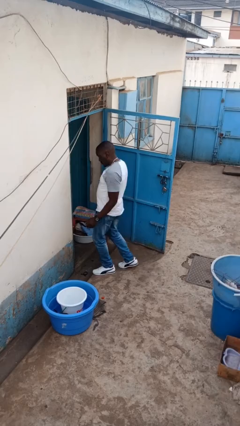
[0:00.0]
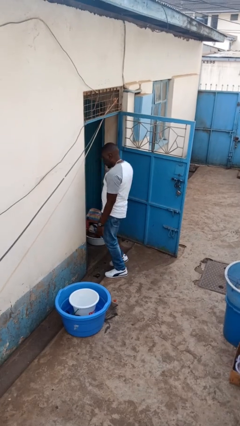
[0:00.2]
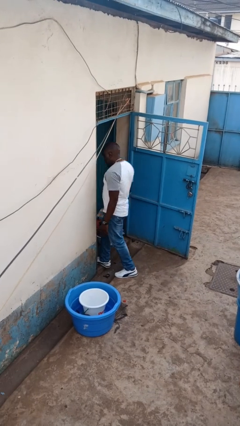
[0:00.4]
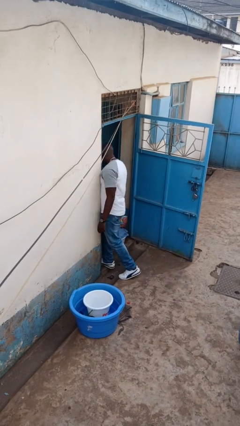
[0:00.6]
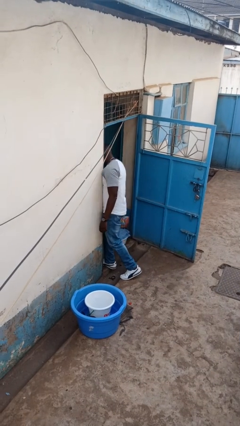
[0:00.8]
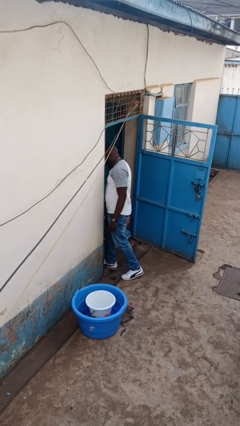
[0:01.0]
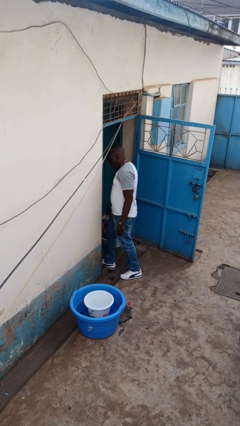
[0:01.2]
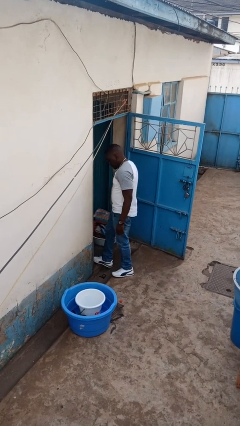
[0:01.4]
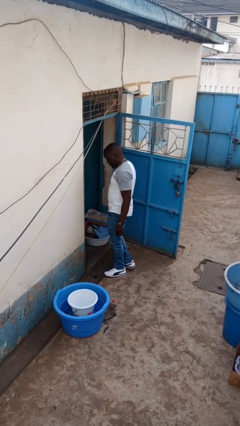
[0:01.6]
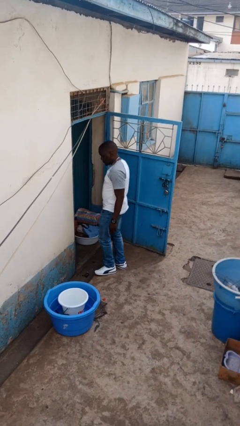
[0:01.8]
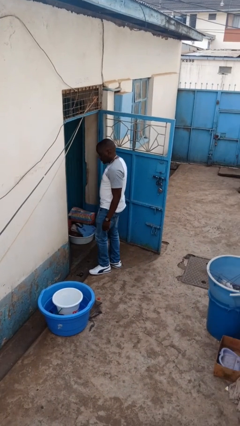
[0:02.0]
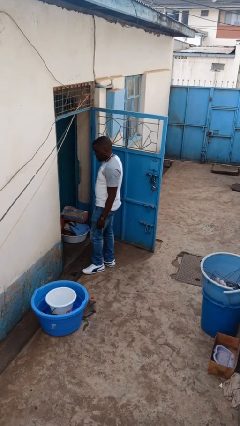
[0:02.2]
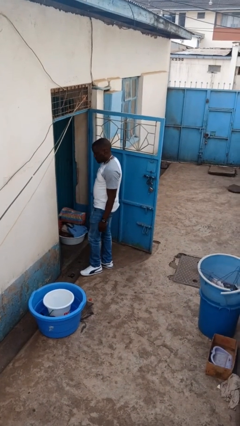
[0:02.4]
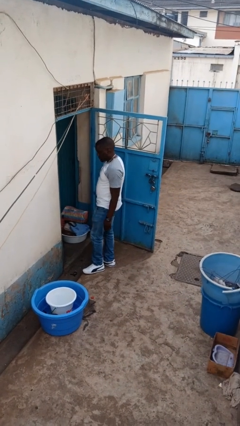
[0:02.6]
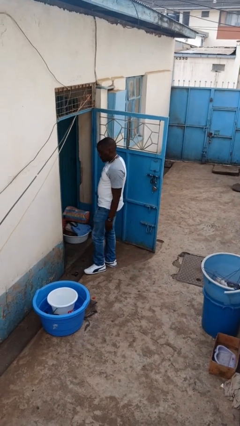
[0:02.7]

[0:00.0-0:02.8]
person bumps into wall

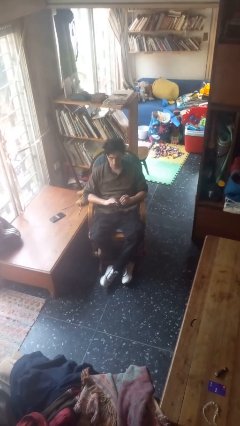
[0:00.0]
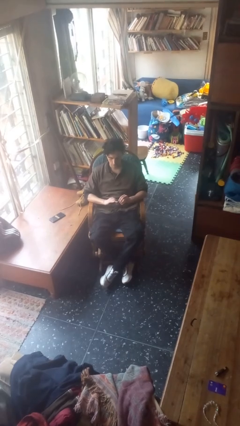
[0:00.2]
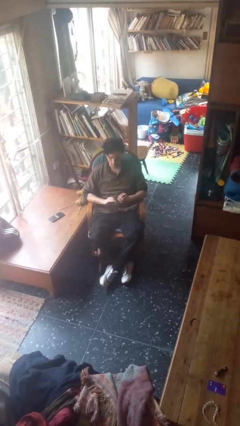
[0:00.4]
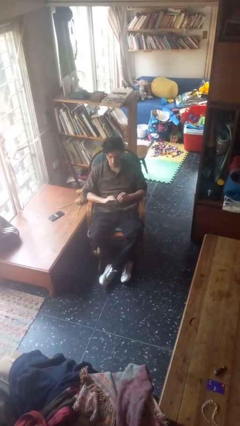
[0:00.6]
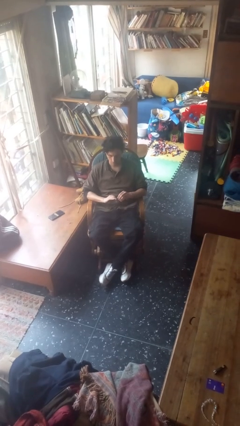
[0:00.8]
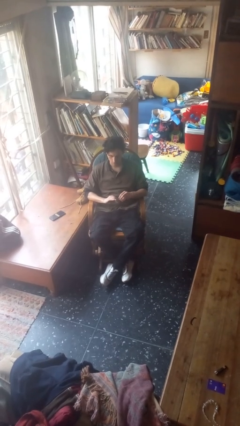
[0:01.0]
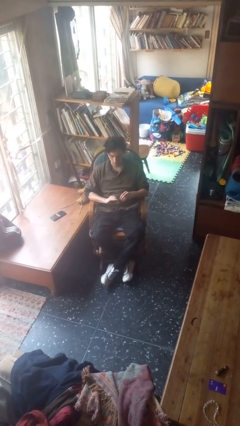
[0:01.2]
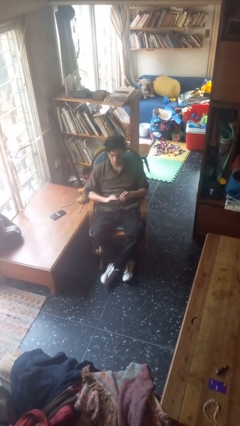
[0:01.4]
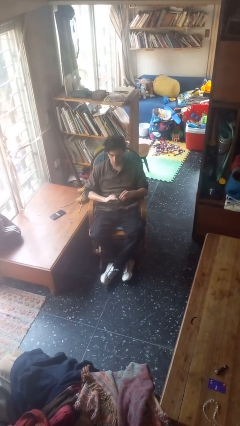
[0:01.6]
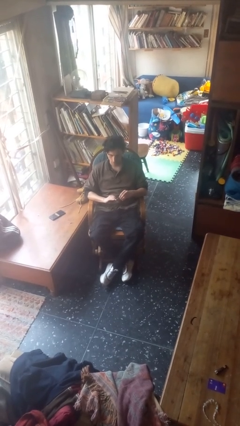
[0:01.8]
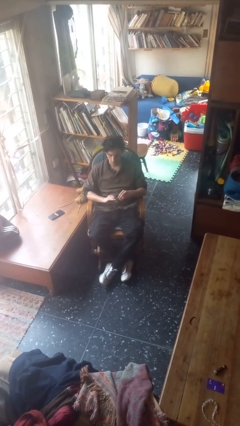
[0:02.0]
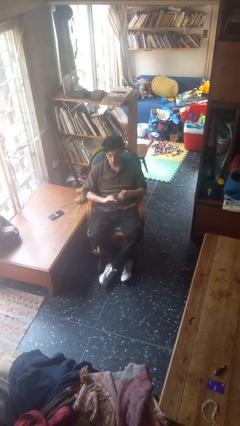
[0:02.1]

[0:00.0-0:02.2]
person files fingernails

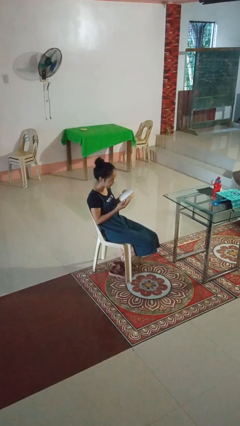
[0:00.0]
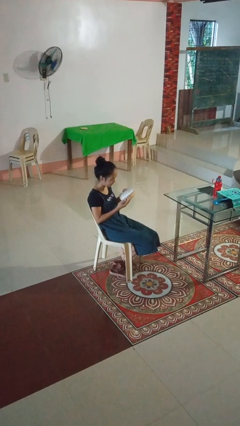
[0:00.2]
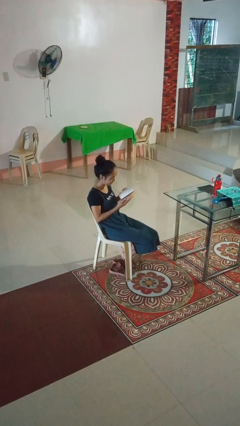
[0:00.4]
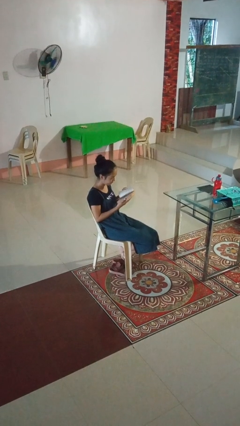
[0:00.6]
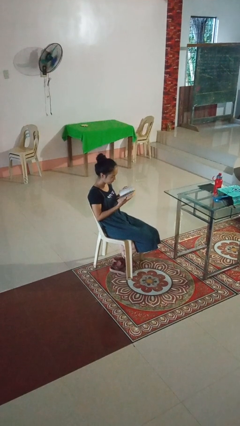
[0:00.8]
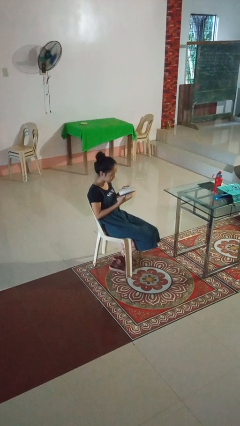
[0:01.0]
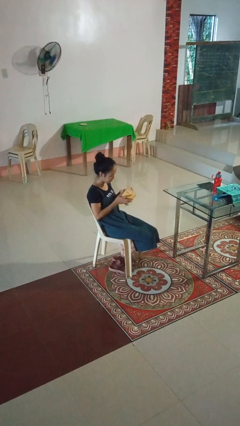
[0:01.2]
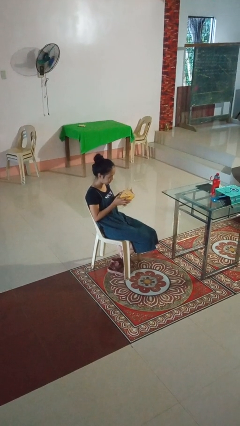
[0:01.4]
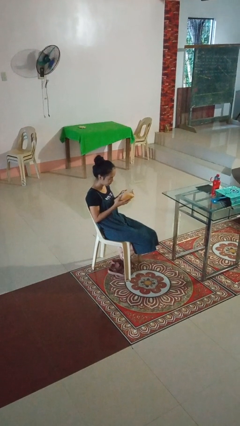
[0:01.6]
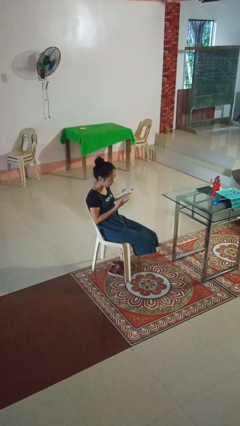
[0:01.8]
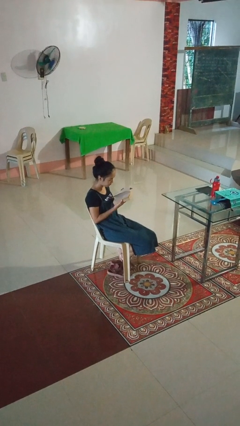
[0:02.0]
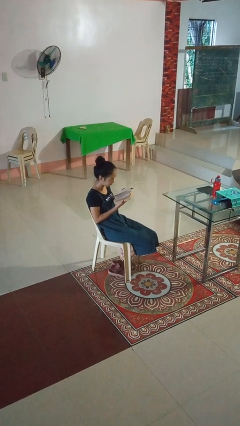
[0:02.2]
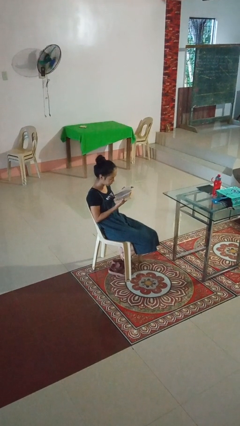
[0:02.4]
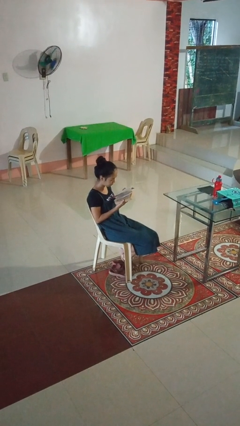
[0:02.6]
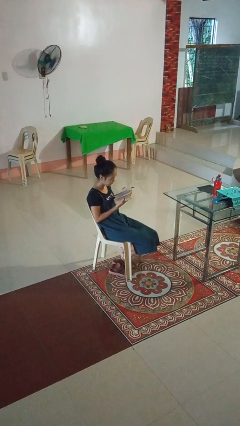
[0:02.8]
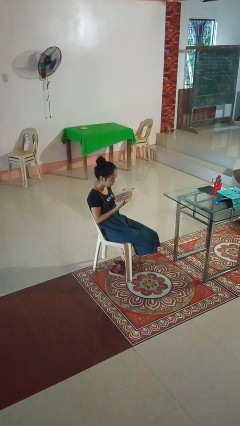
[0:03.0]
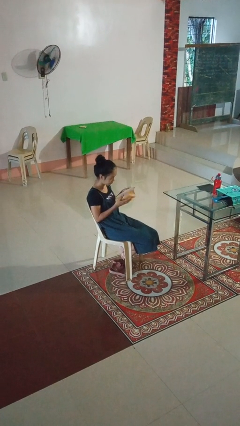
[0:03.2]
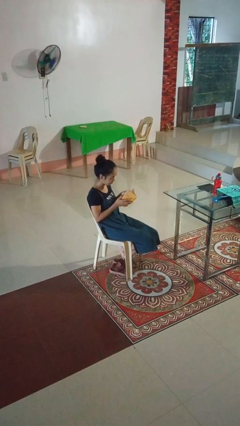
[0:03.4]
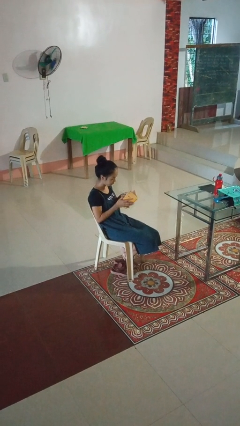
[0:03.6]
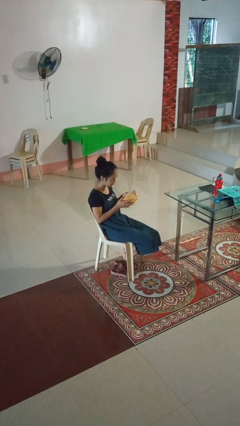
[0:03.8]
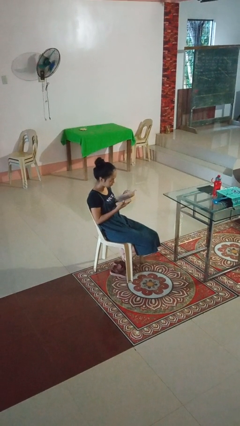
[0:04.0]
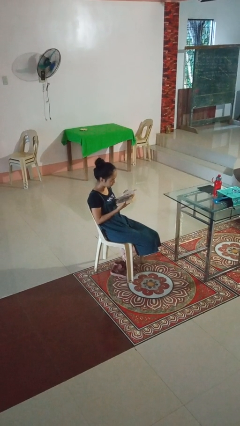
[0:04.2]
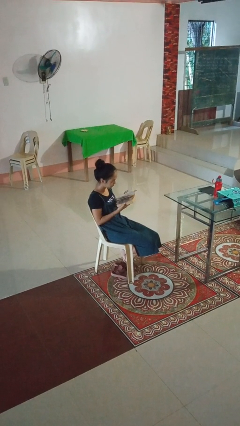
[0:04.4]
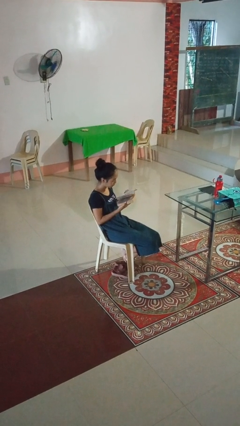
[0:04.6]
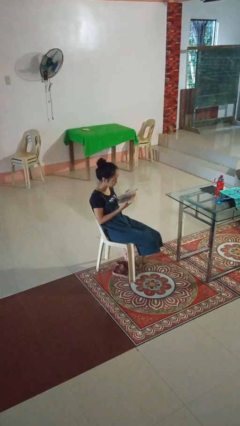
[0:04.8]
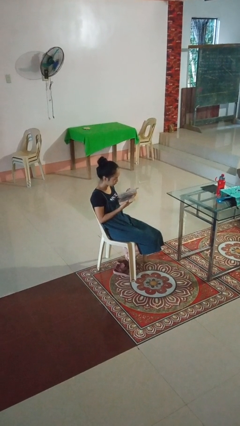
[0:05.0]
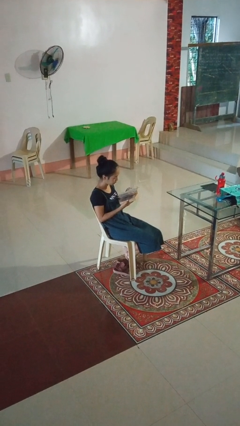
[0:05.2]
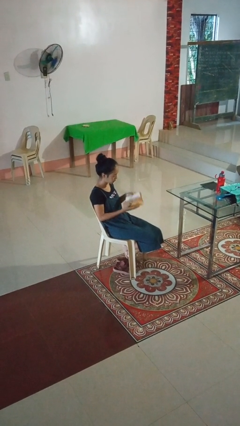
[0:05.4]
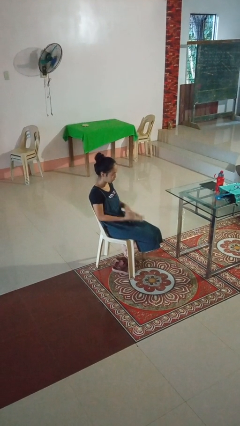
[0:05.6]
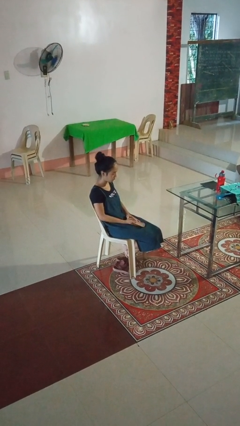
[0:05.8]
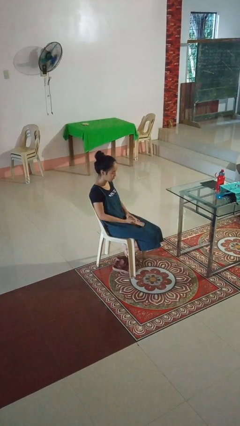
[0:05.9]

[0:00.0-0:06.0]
person reads book

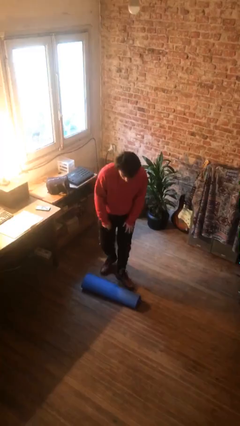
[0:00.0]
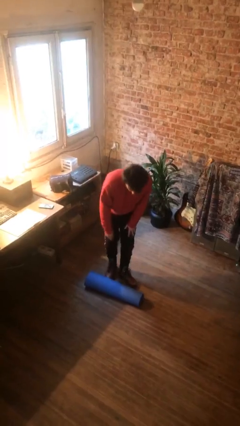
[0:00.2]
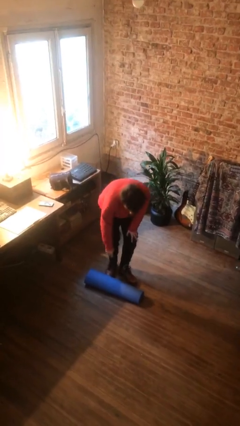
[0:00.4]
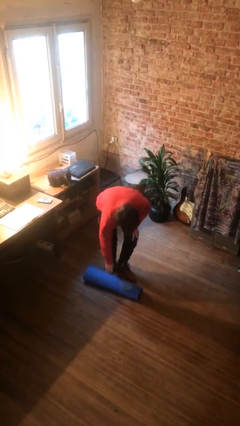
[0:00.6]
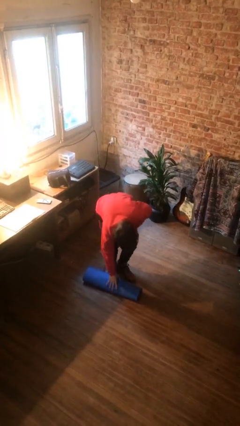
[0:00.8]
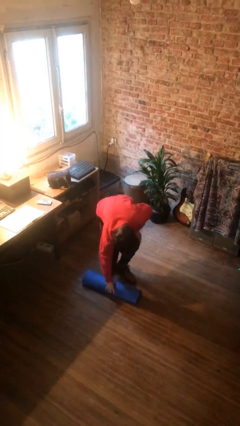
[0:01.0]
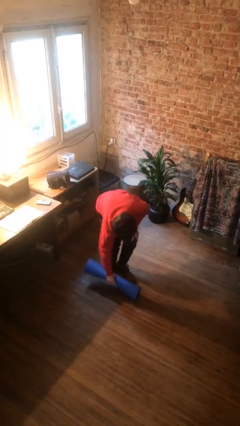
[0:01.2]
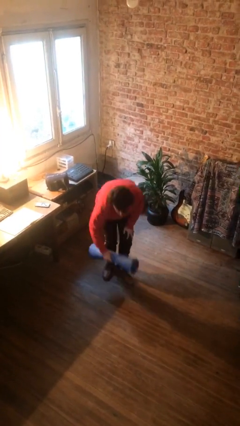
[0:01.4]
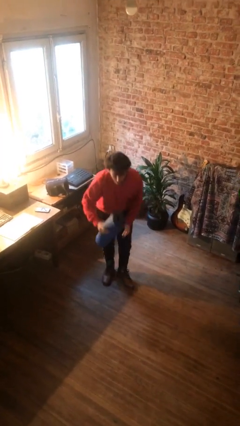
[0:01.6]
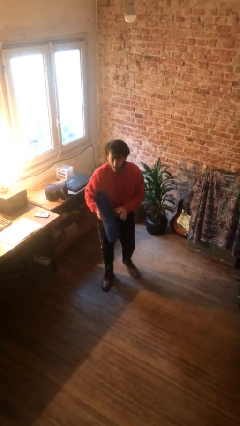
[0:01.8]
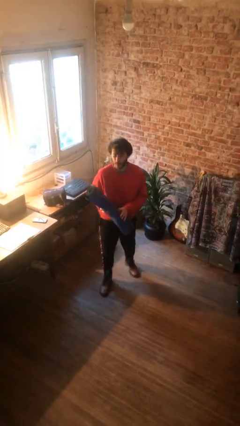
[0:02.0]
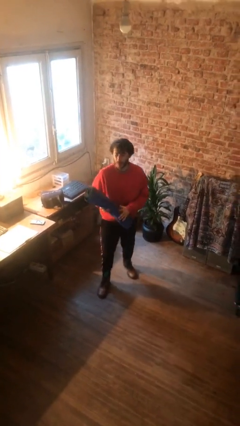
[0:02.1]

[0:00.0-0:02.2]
person picks up object from floor

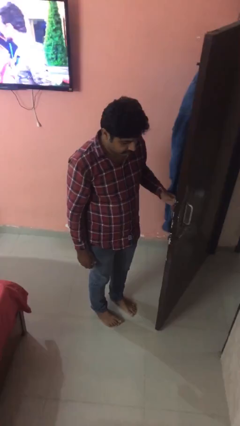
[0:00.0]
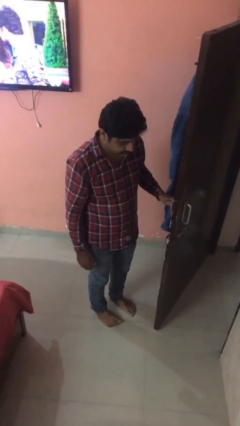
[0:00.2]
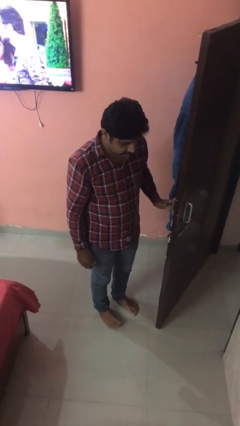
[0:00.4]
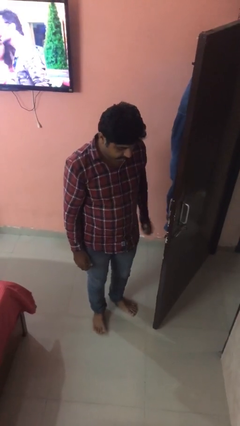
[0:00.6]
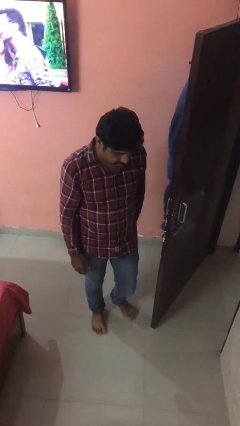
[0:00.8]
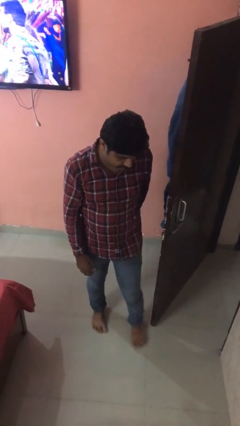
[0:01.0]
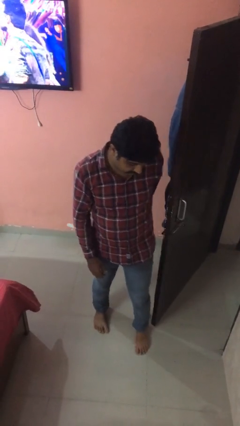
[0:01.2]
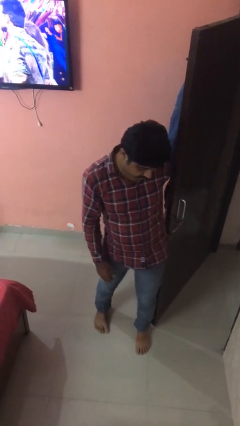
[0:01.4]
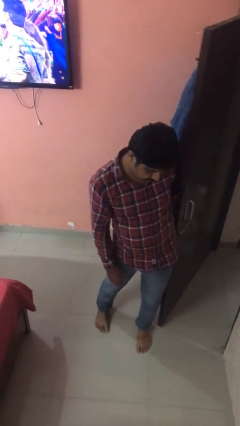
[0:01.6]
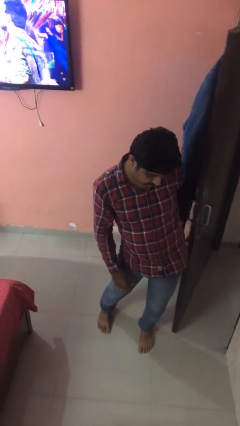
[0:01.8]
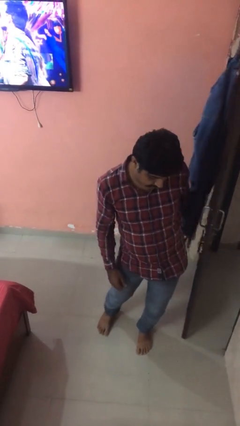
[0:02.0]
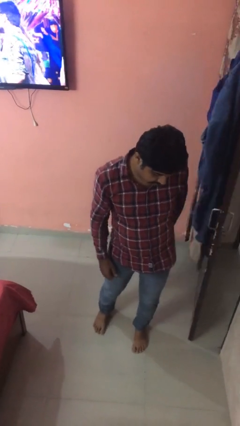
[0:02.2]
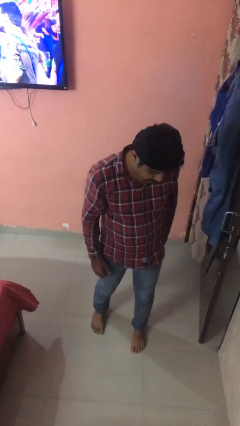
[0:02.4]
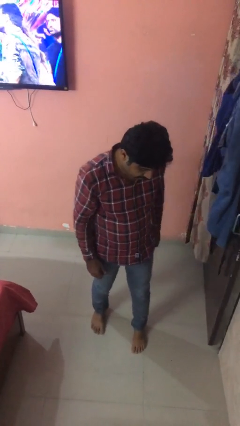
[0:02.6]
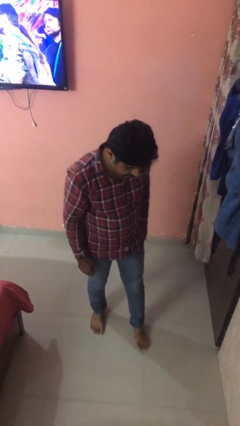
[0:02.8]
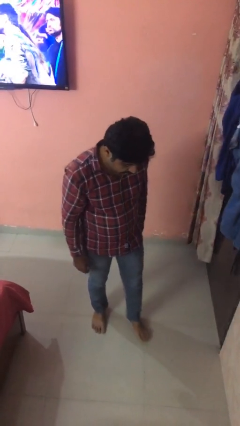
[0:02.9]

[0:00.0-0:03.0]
person closes door with hip

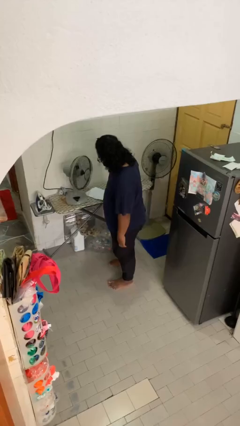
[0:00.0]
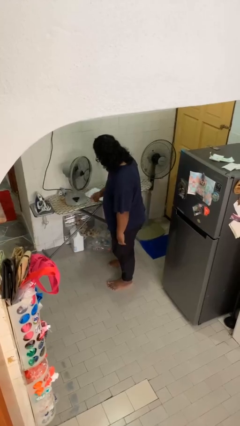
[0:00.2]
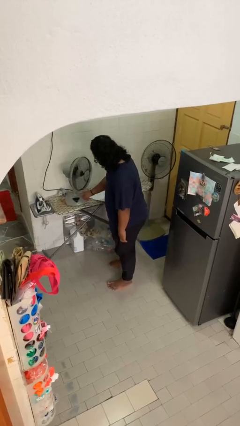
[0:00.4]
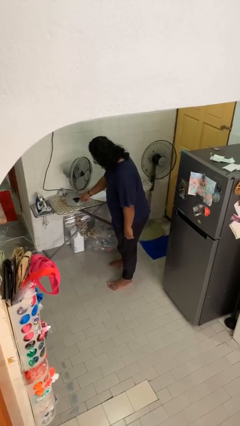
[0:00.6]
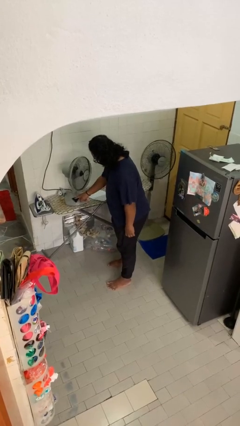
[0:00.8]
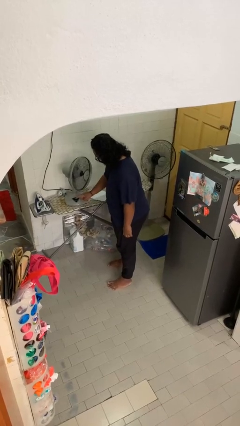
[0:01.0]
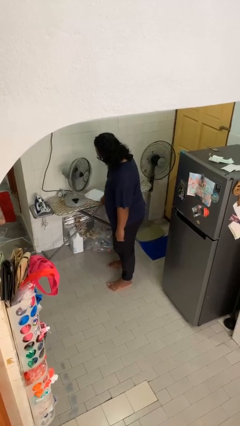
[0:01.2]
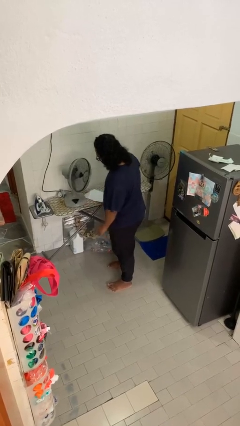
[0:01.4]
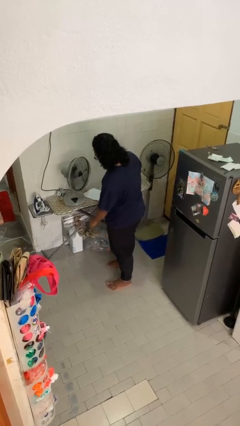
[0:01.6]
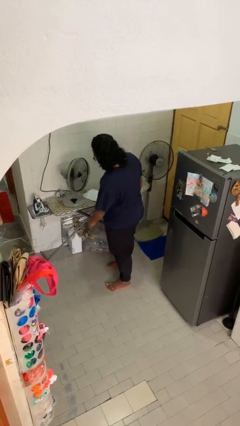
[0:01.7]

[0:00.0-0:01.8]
person turns on fan
